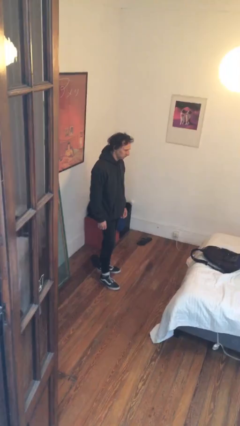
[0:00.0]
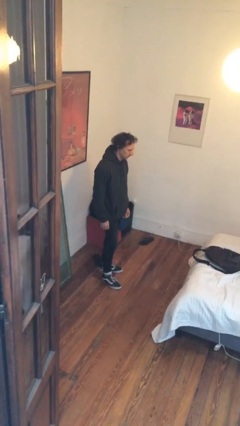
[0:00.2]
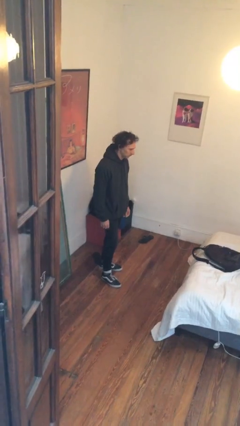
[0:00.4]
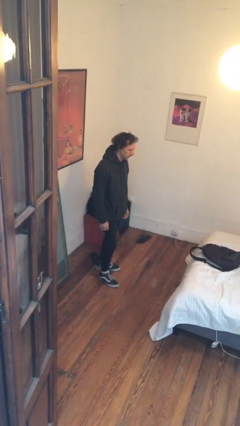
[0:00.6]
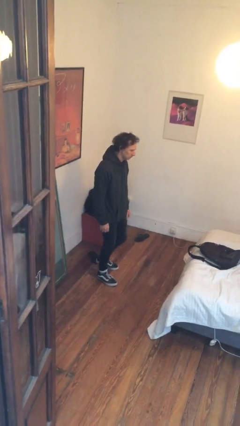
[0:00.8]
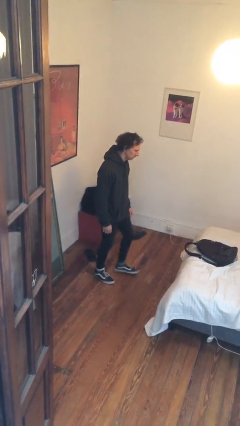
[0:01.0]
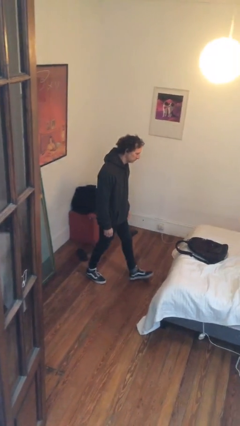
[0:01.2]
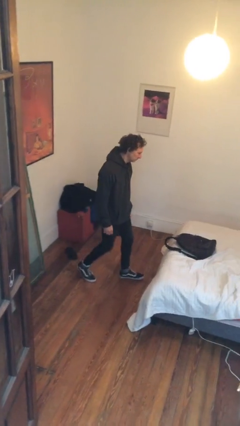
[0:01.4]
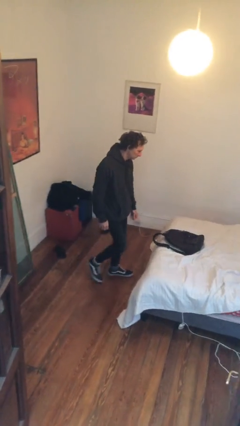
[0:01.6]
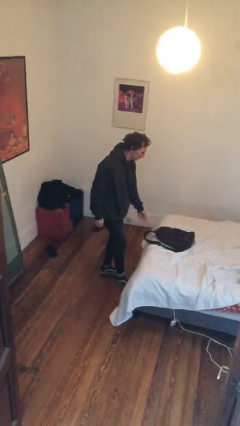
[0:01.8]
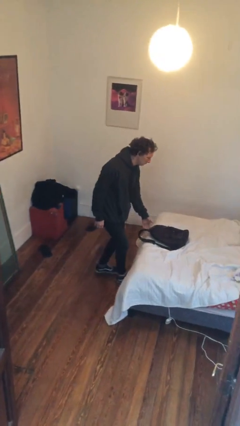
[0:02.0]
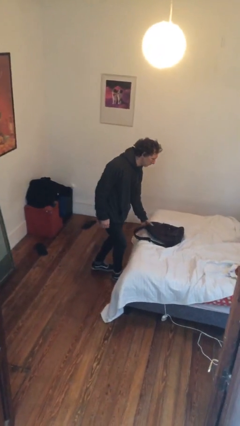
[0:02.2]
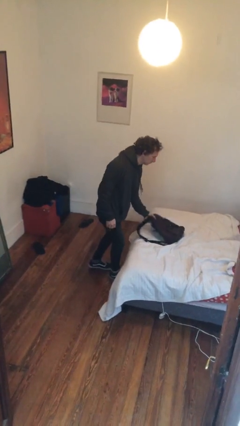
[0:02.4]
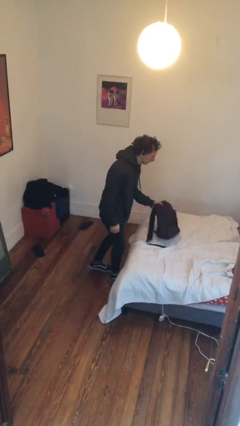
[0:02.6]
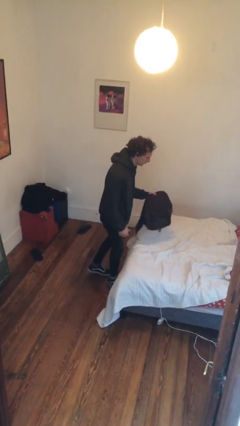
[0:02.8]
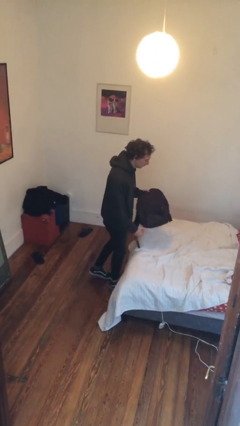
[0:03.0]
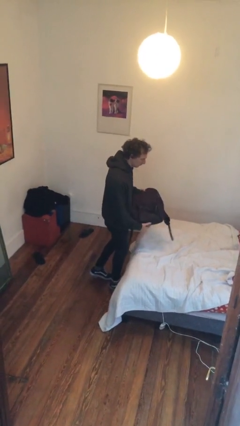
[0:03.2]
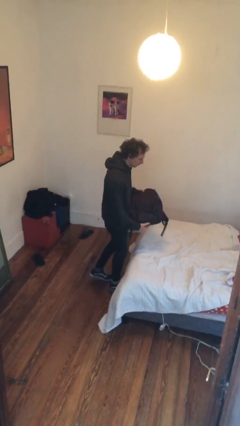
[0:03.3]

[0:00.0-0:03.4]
person picks up object from bed

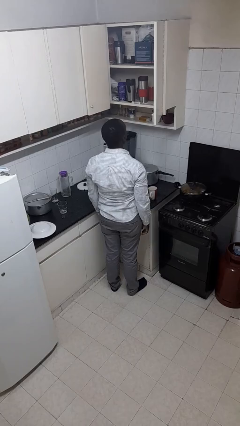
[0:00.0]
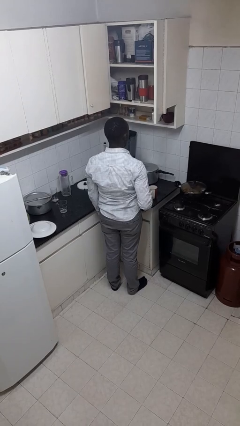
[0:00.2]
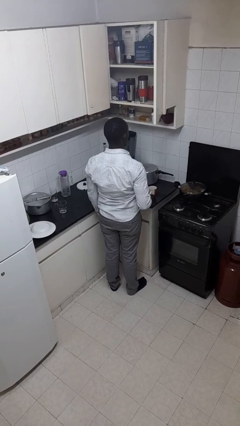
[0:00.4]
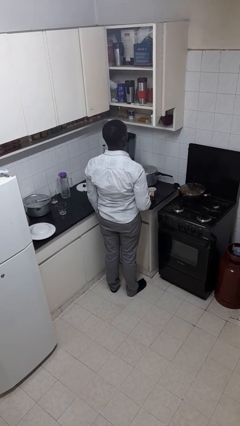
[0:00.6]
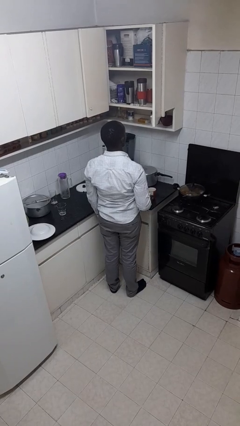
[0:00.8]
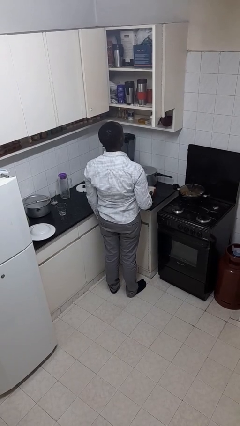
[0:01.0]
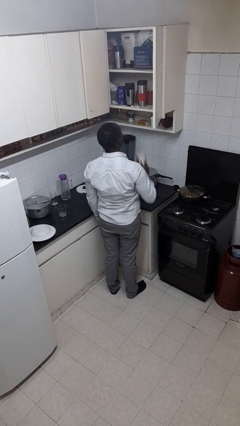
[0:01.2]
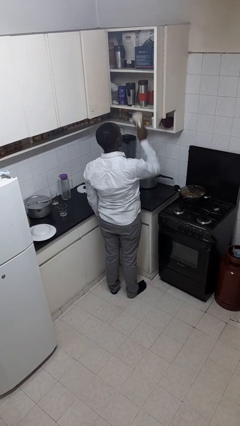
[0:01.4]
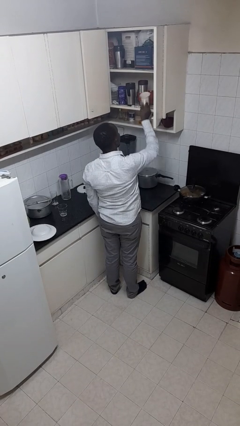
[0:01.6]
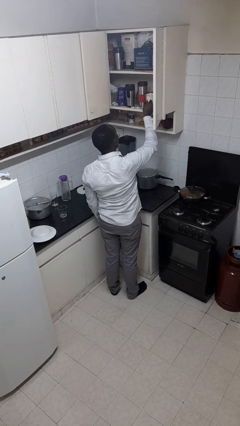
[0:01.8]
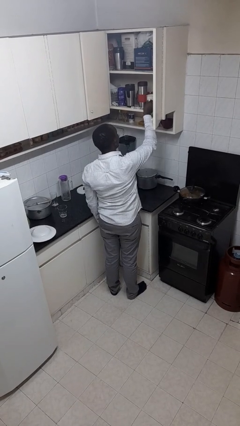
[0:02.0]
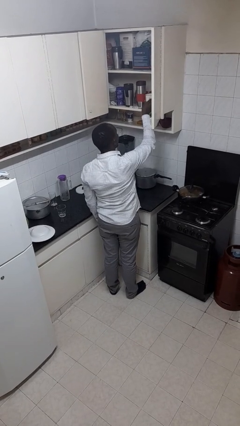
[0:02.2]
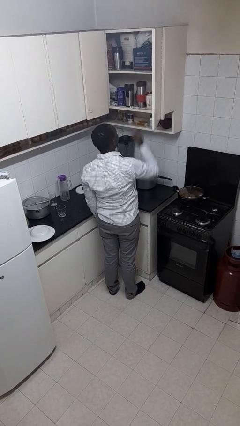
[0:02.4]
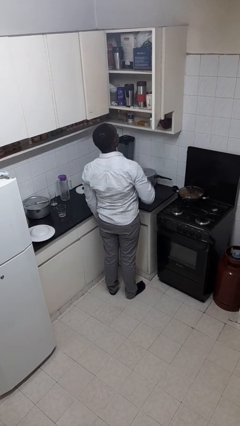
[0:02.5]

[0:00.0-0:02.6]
person puts object in cabinet

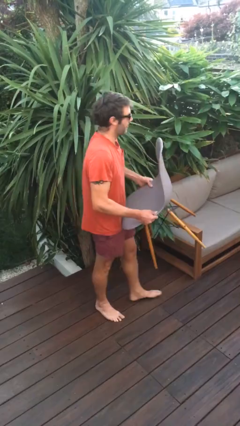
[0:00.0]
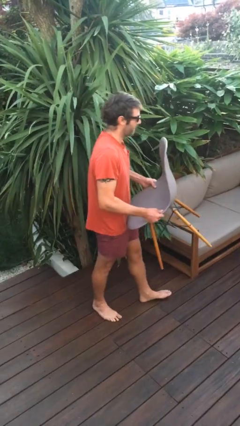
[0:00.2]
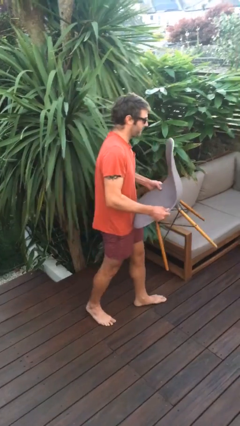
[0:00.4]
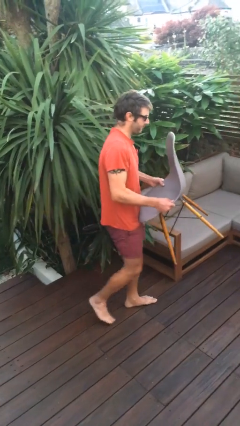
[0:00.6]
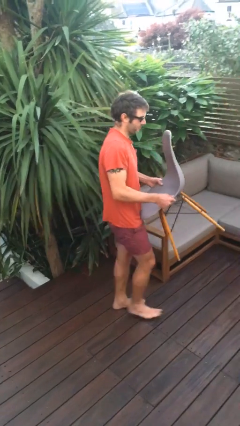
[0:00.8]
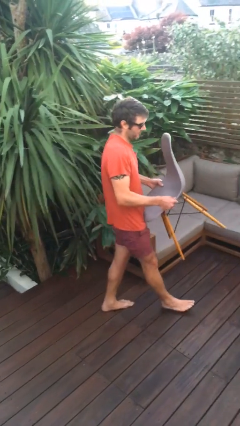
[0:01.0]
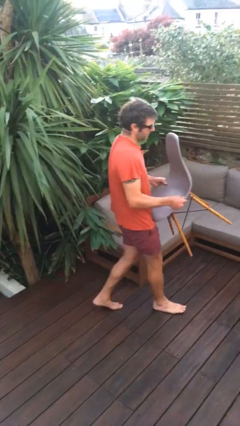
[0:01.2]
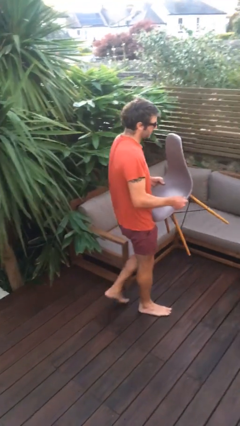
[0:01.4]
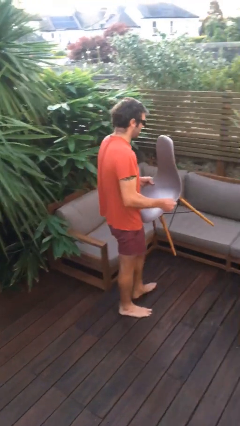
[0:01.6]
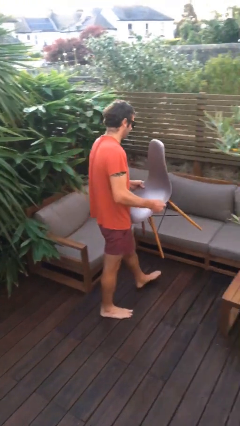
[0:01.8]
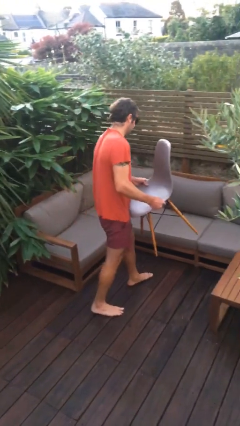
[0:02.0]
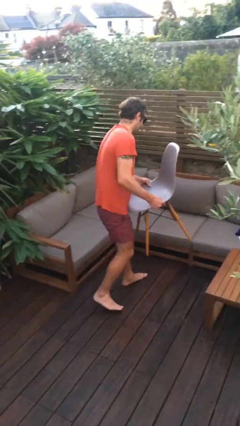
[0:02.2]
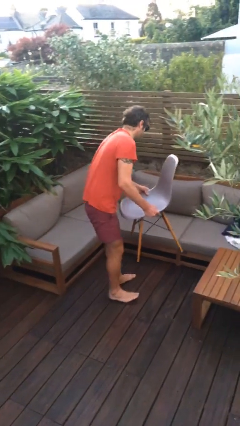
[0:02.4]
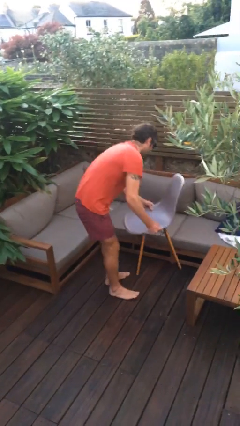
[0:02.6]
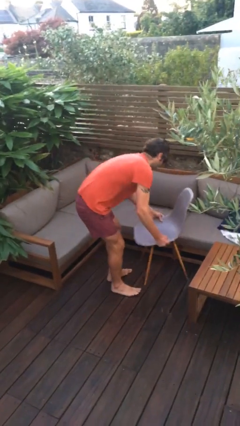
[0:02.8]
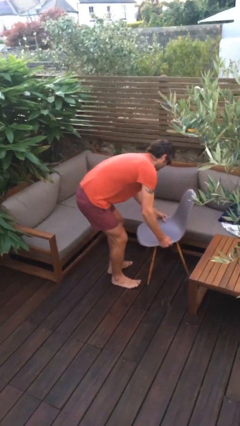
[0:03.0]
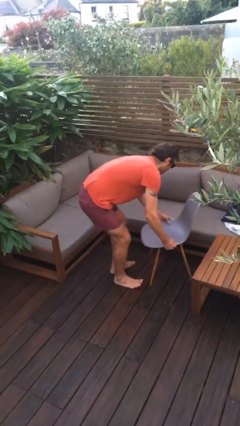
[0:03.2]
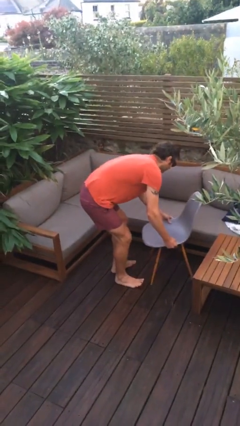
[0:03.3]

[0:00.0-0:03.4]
person carries heavy object

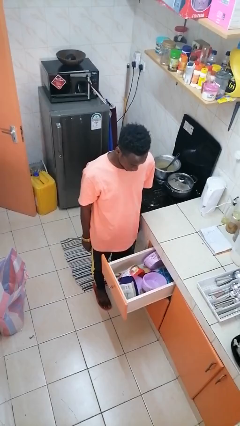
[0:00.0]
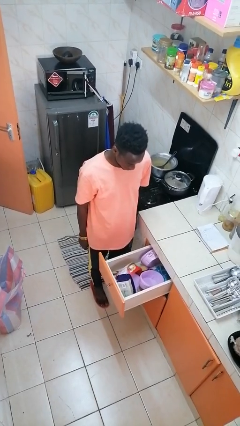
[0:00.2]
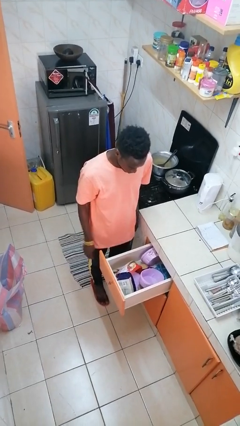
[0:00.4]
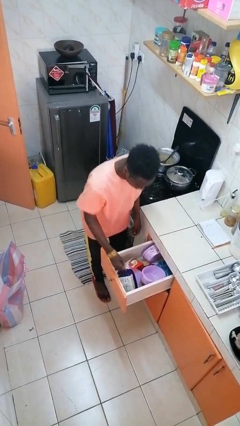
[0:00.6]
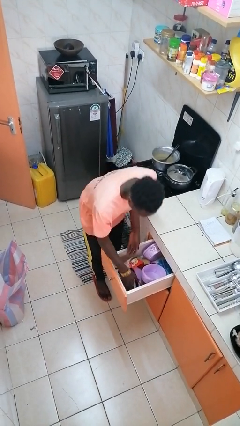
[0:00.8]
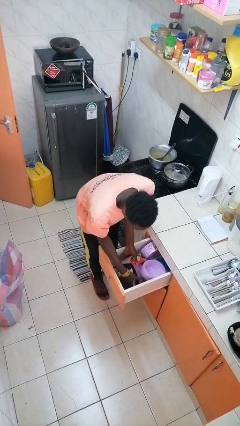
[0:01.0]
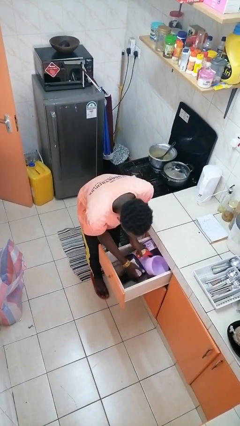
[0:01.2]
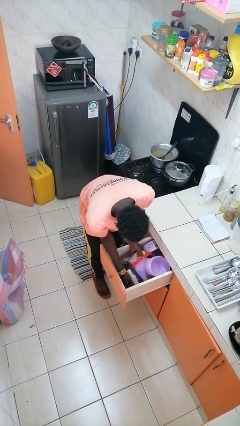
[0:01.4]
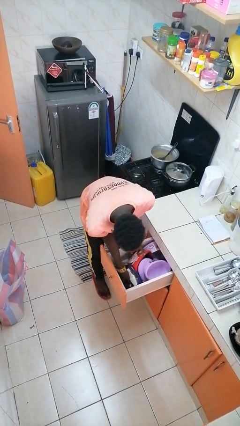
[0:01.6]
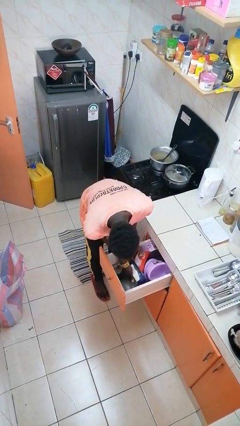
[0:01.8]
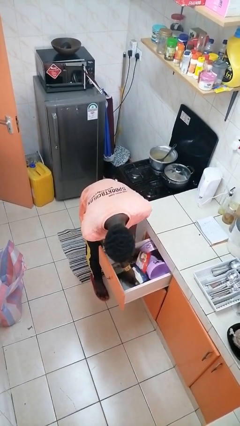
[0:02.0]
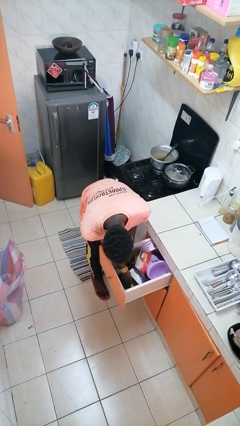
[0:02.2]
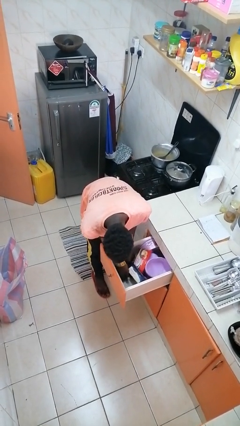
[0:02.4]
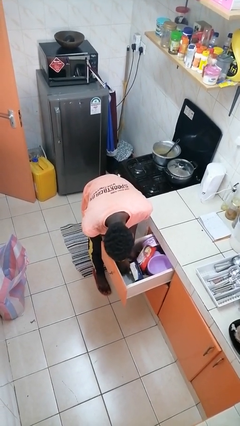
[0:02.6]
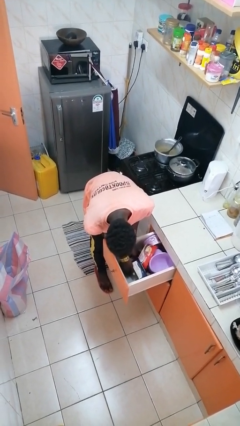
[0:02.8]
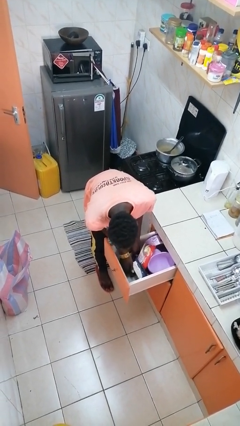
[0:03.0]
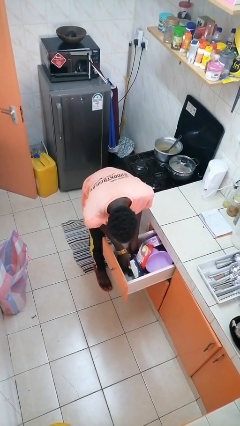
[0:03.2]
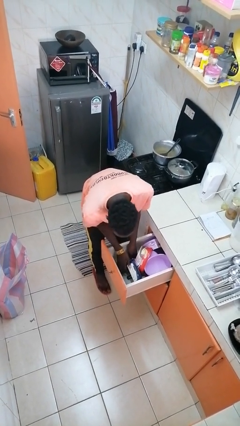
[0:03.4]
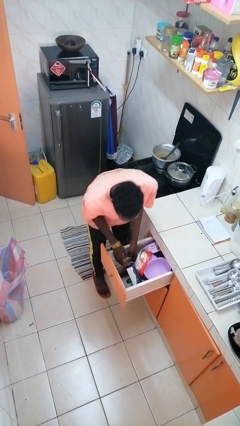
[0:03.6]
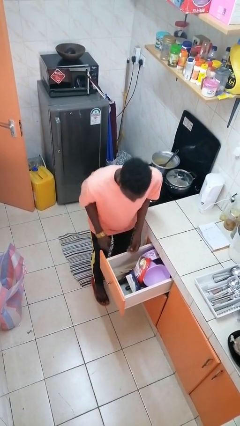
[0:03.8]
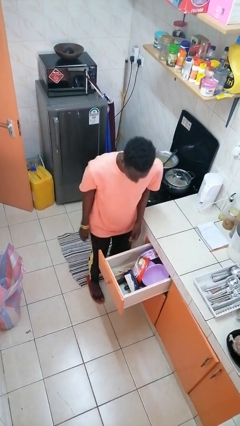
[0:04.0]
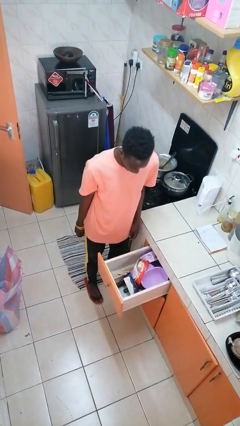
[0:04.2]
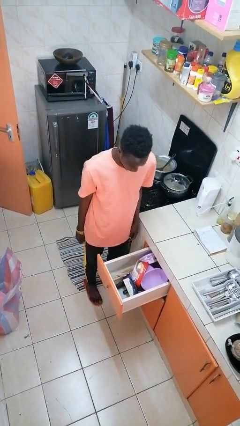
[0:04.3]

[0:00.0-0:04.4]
person searches in kitchen drawer

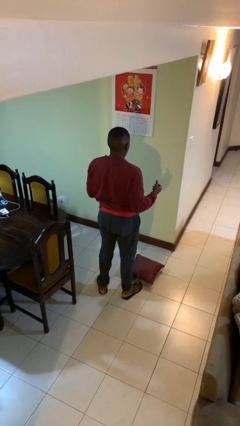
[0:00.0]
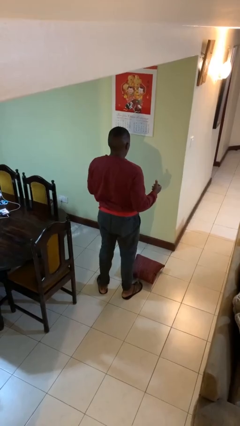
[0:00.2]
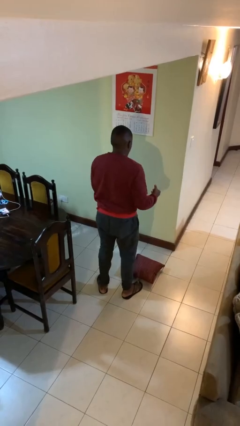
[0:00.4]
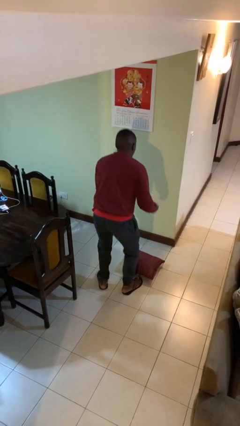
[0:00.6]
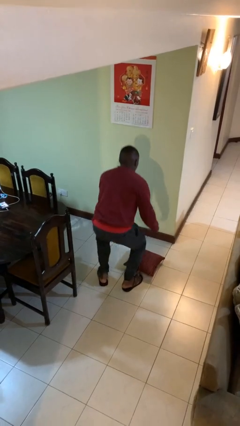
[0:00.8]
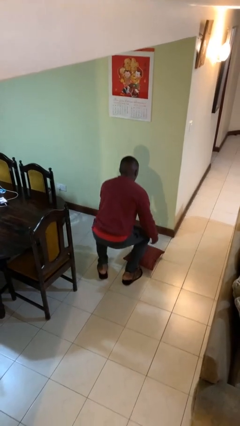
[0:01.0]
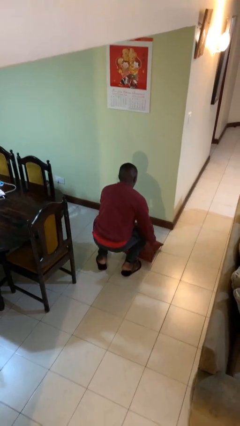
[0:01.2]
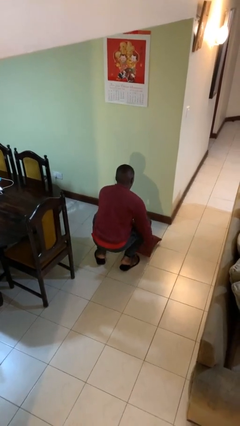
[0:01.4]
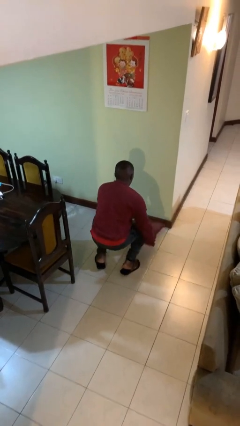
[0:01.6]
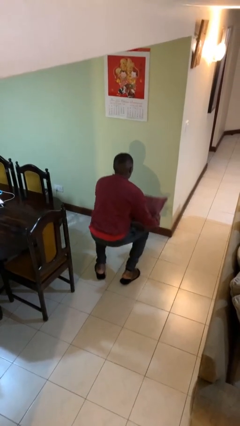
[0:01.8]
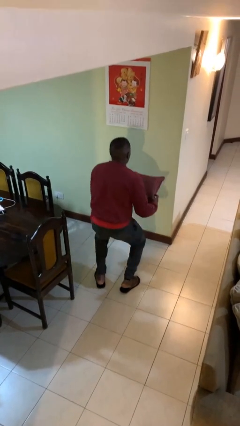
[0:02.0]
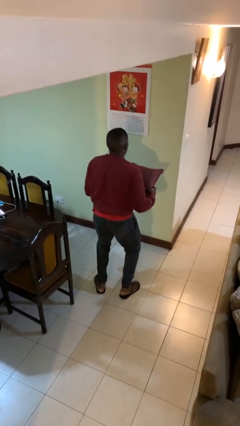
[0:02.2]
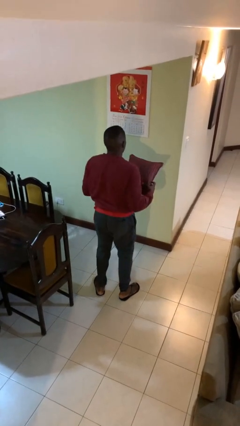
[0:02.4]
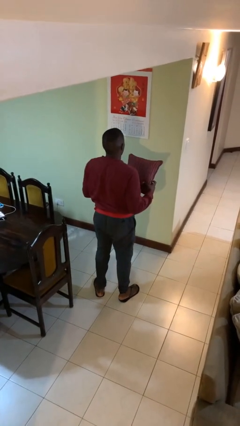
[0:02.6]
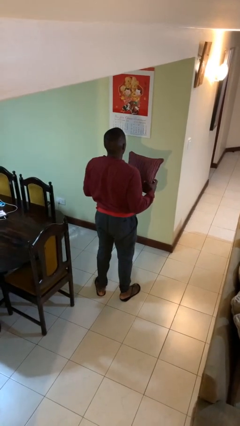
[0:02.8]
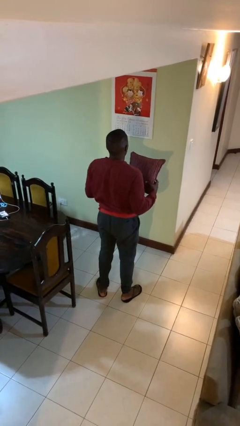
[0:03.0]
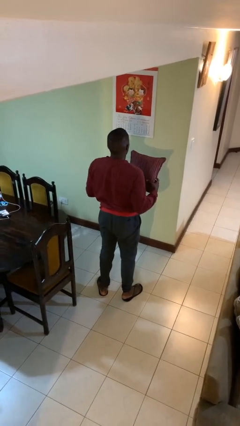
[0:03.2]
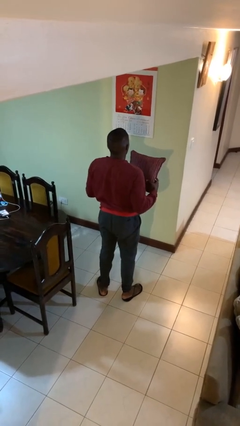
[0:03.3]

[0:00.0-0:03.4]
person picks up object from floor

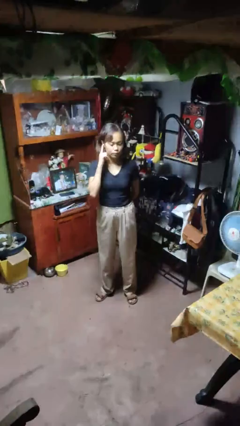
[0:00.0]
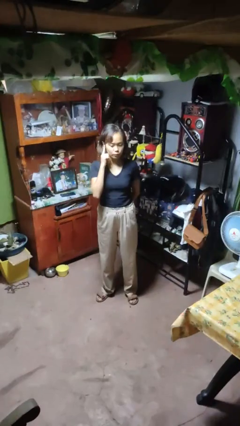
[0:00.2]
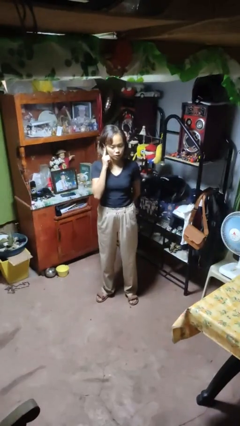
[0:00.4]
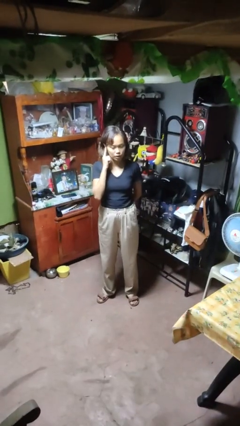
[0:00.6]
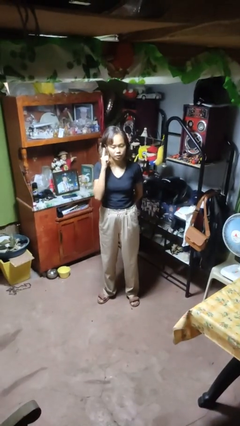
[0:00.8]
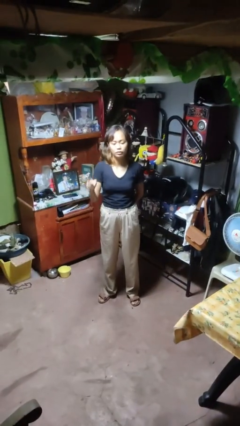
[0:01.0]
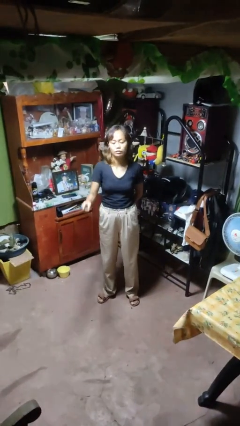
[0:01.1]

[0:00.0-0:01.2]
person gestures listen closely
